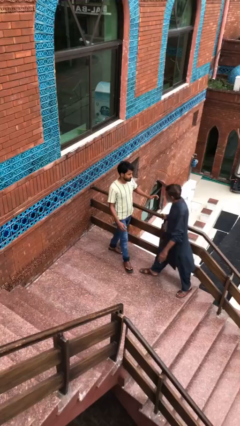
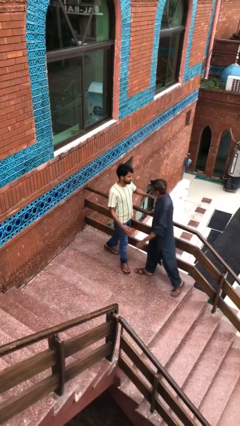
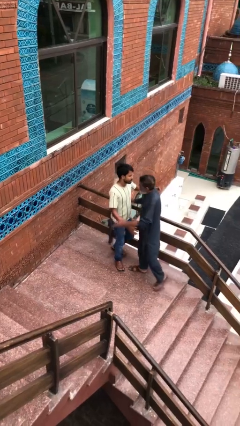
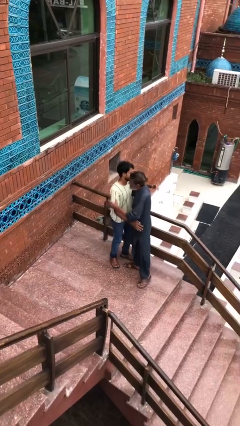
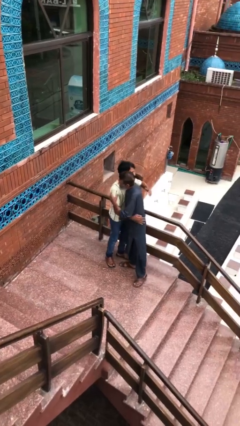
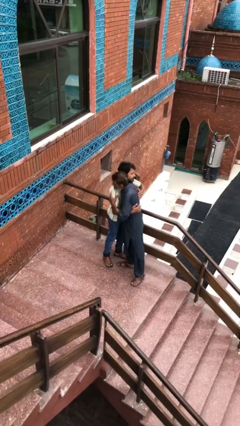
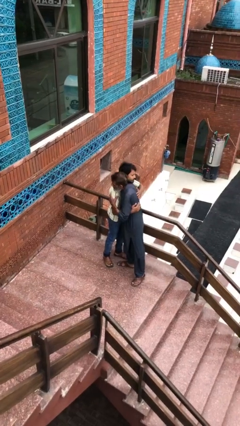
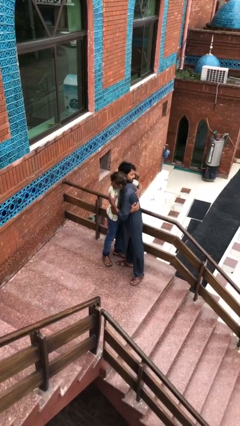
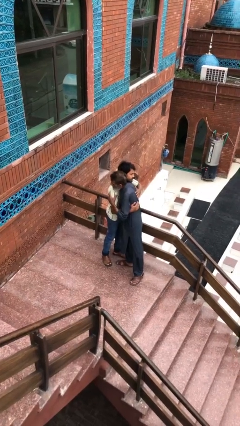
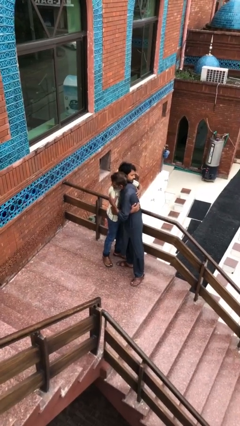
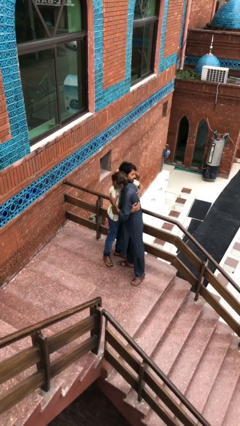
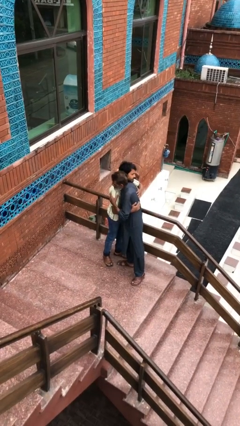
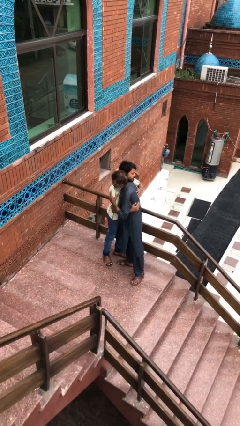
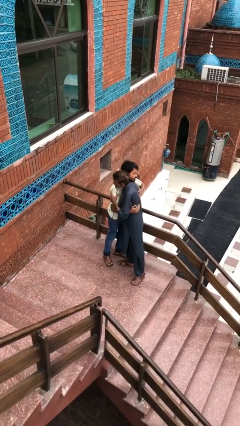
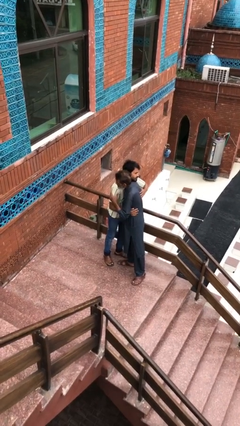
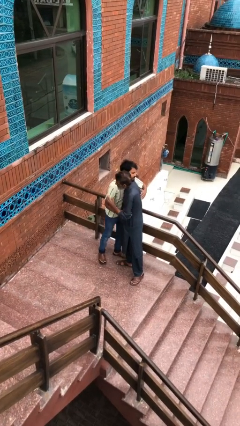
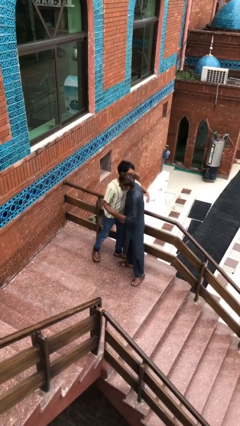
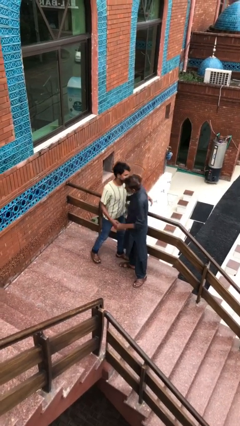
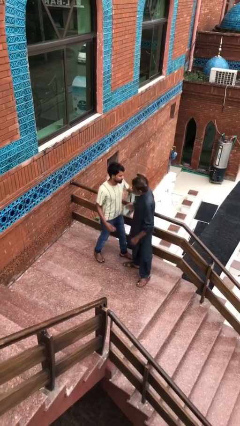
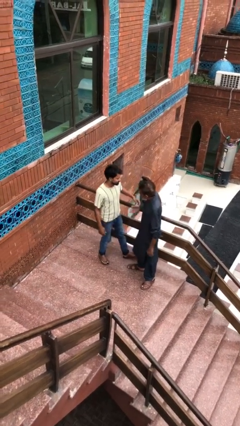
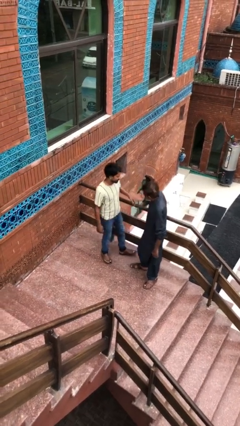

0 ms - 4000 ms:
person embraces person

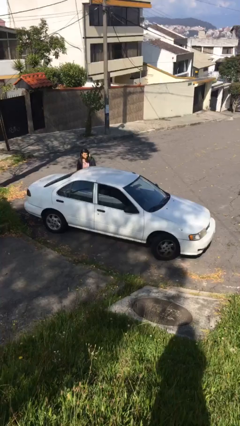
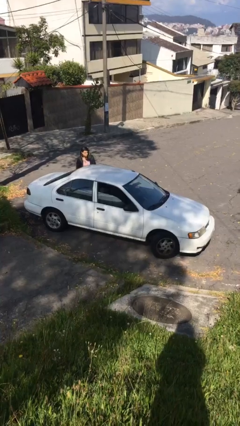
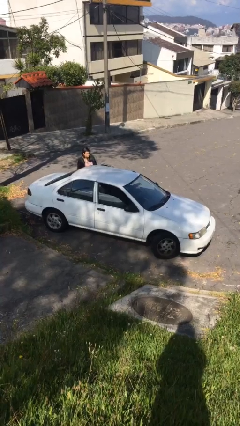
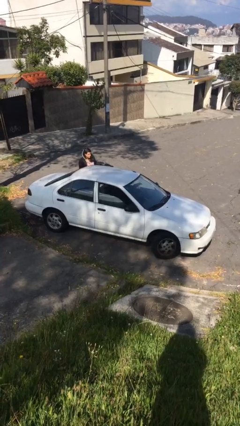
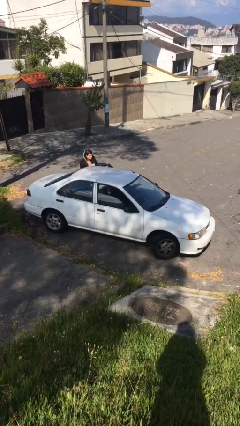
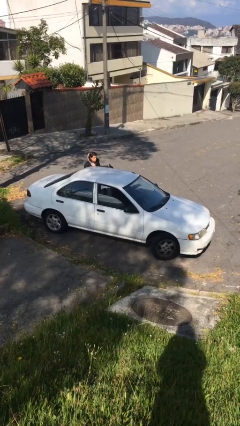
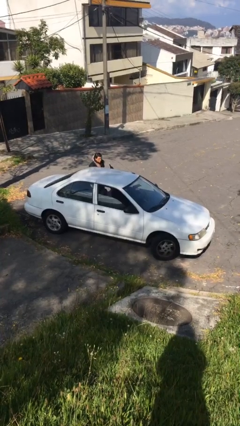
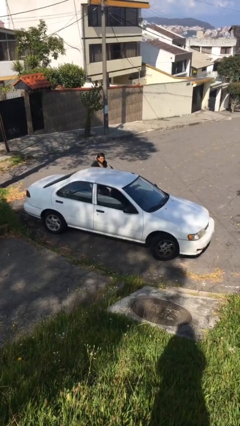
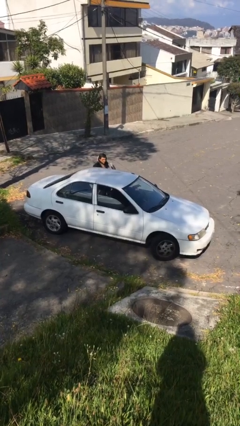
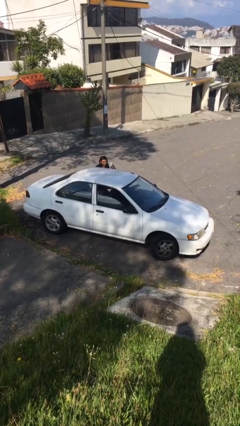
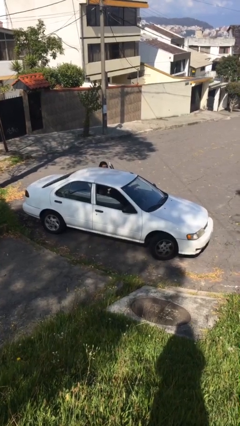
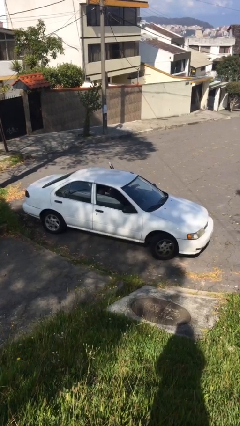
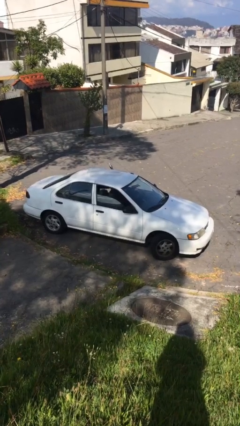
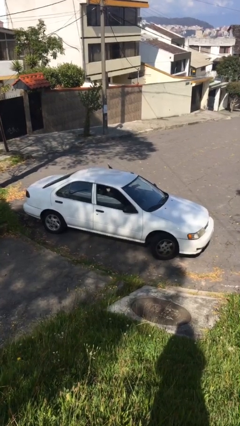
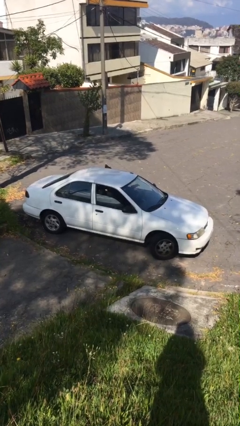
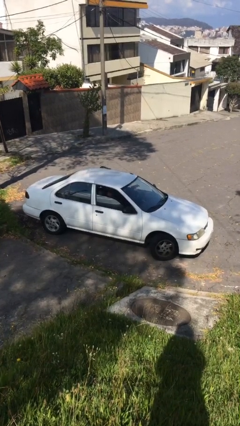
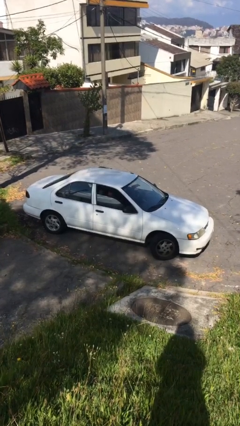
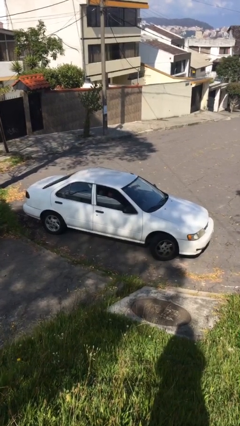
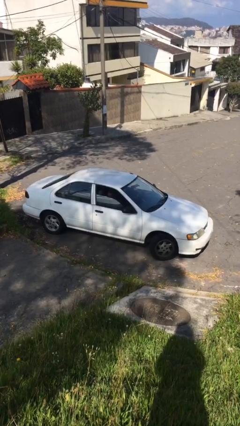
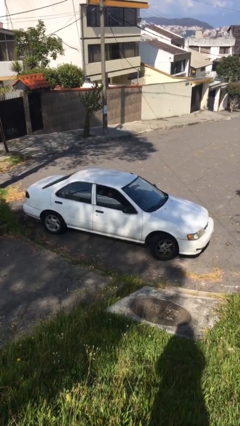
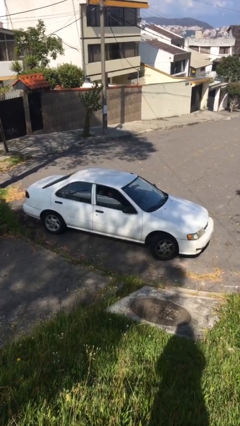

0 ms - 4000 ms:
car picks up person

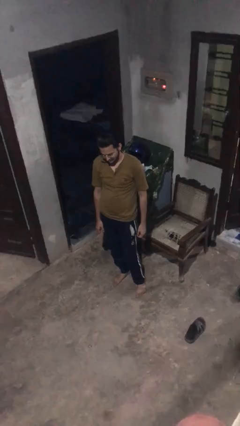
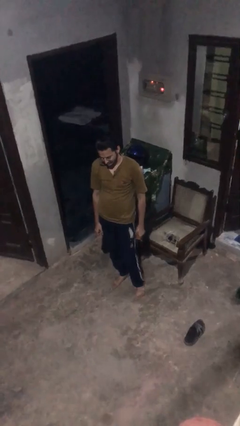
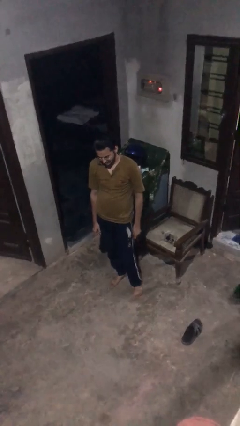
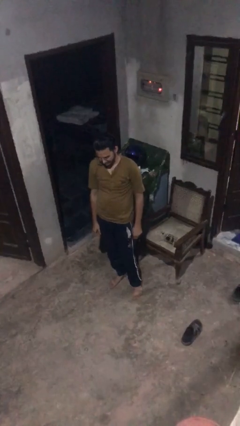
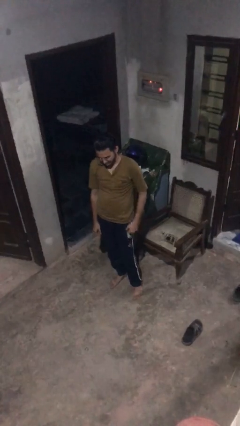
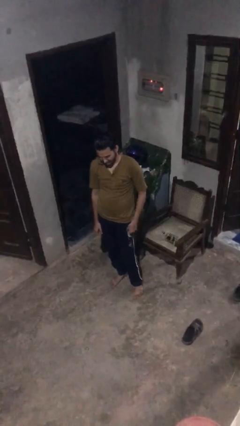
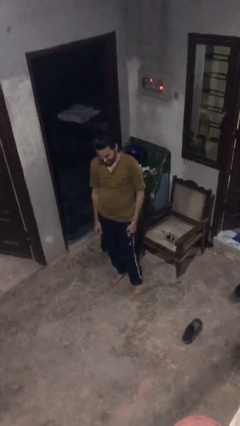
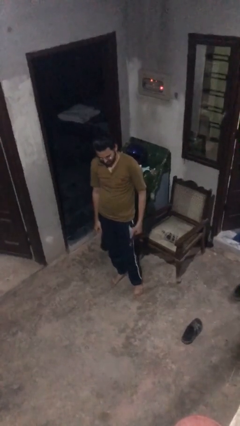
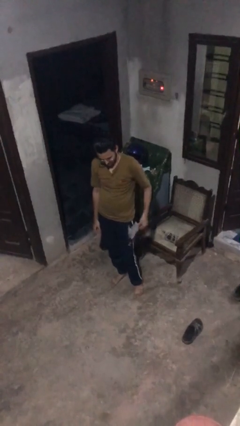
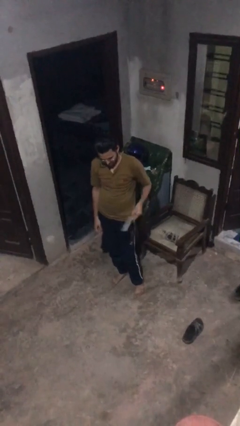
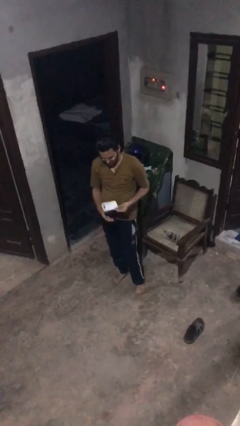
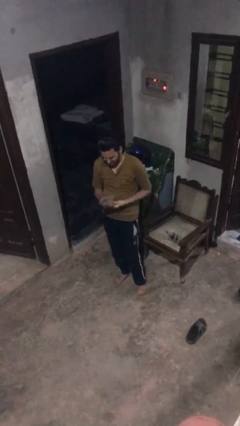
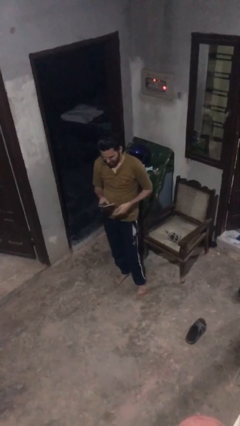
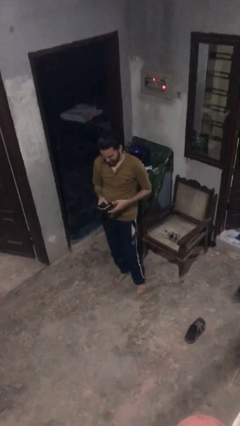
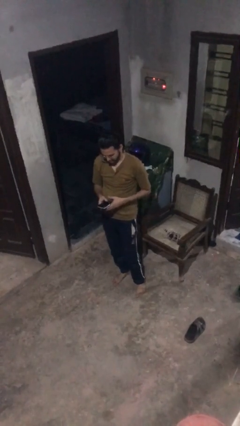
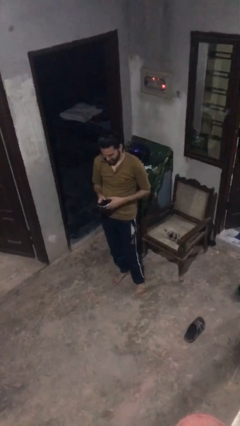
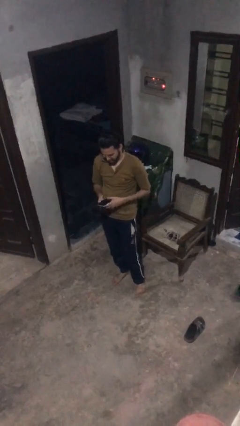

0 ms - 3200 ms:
person takes phone from pocket

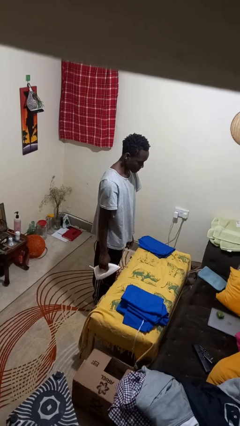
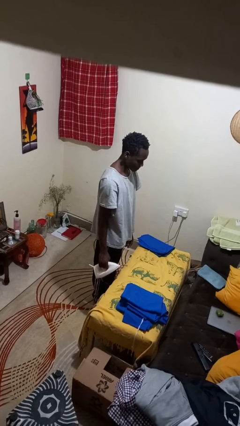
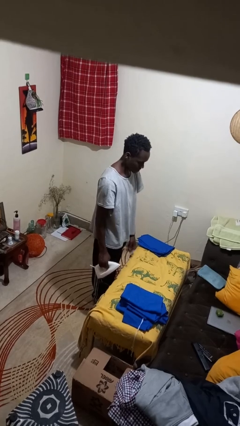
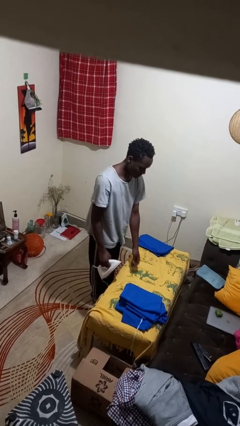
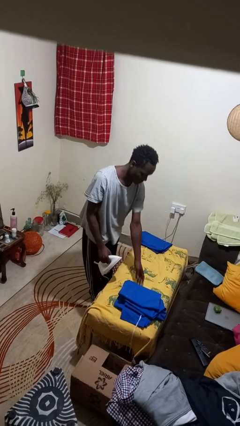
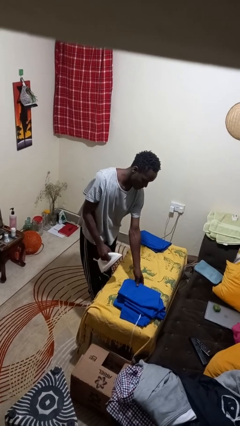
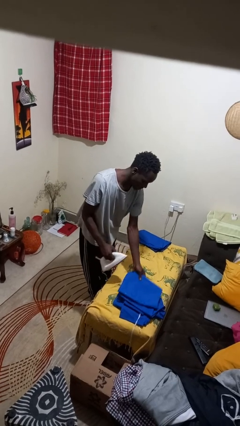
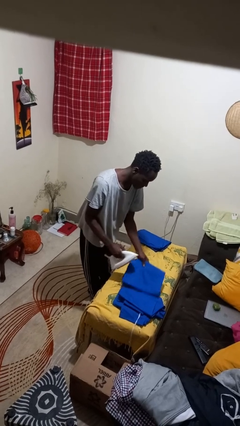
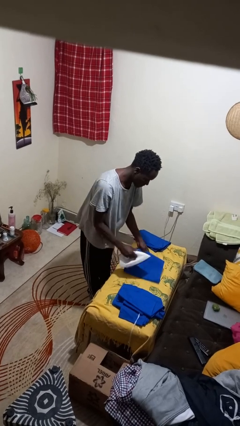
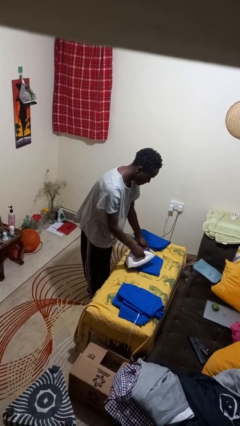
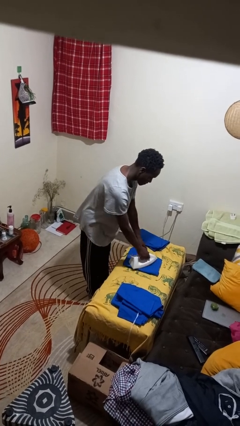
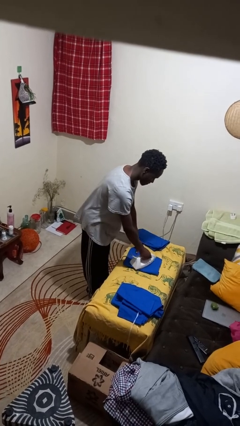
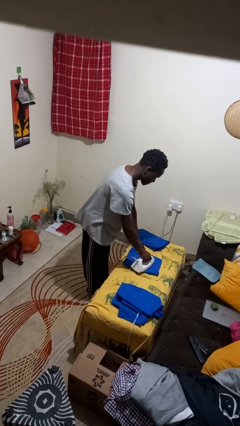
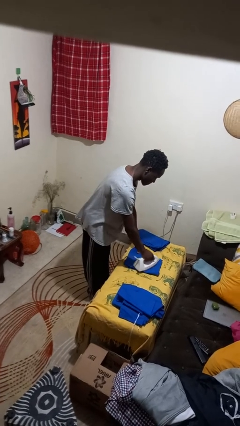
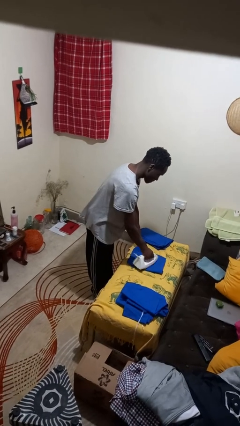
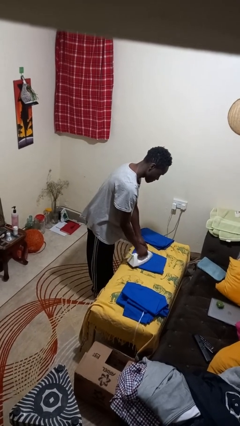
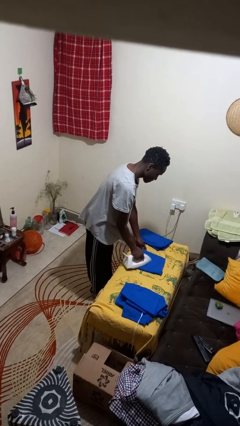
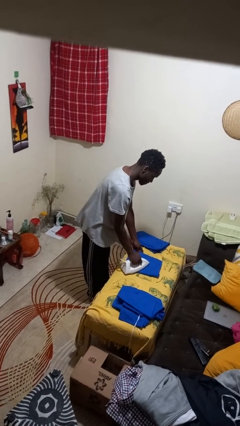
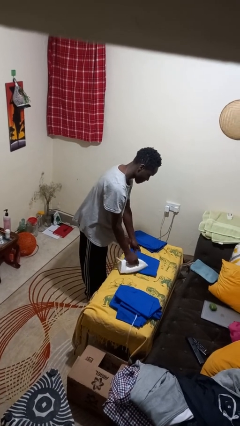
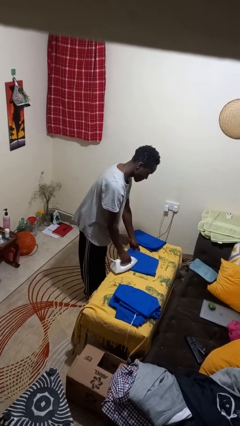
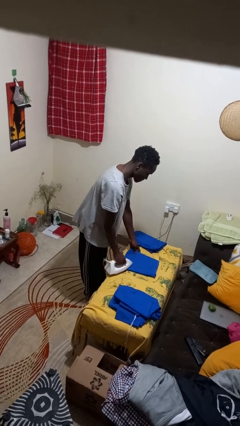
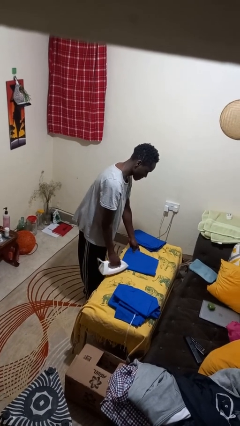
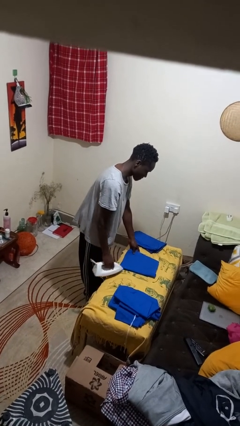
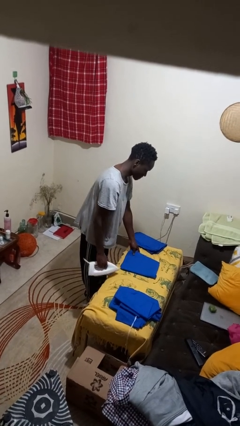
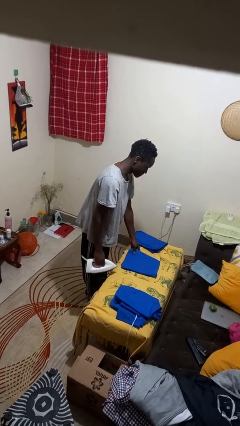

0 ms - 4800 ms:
person irons clothes

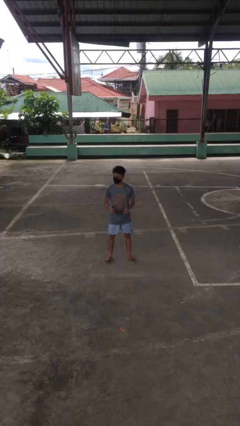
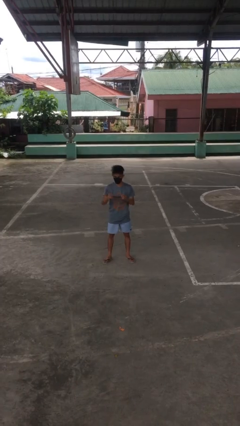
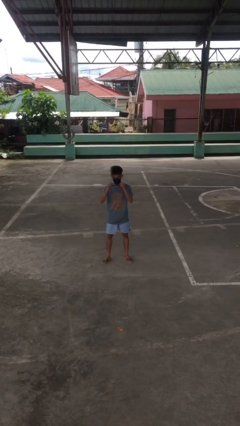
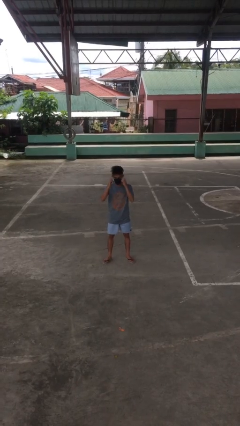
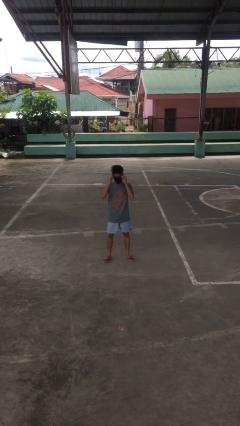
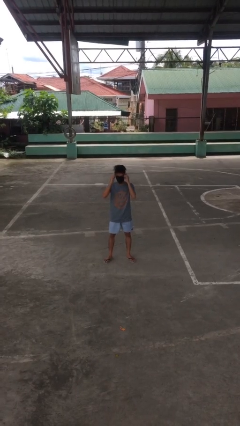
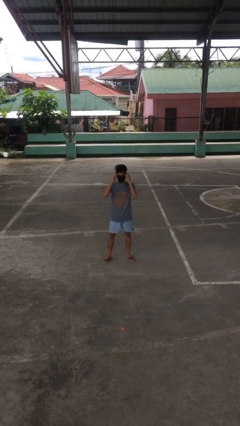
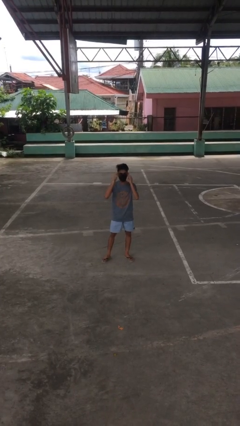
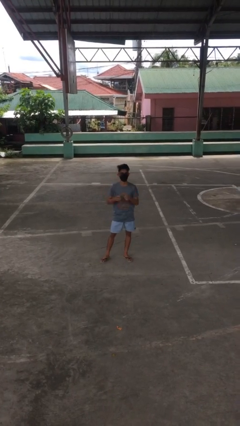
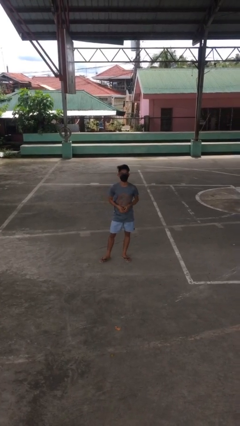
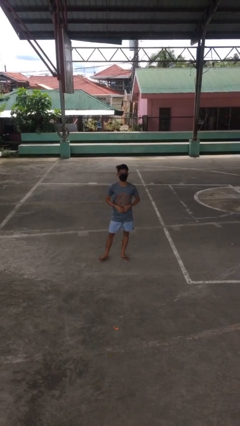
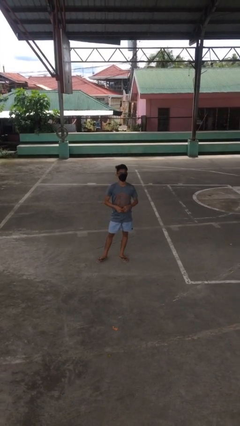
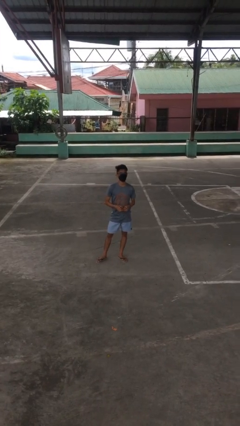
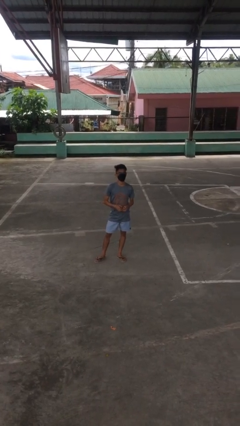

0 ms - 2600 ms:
person puts on glasses
